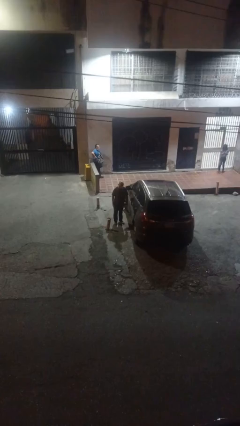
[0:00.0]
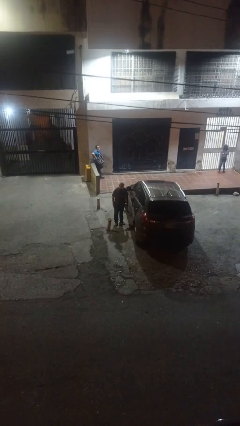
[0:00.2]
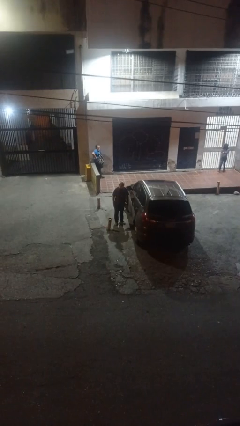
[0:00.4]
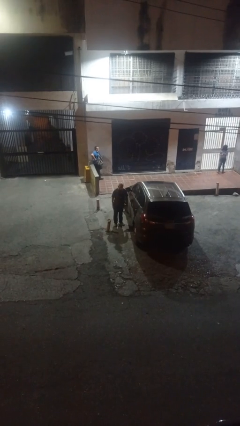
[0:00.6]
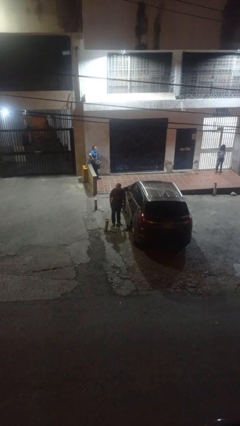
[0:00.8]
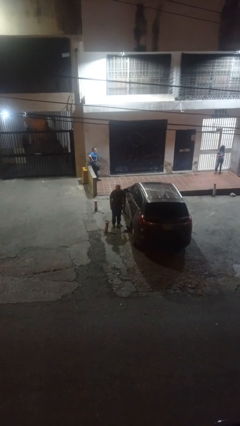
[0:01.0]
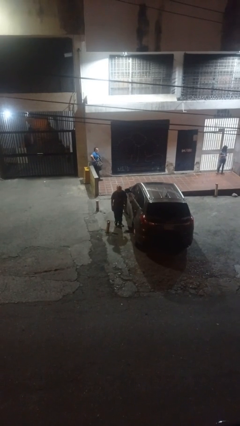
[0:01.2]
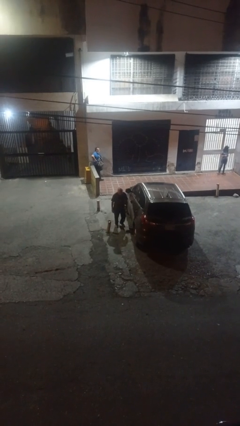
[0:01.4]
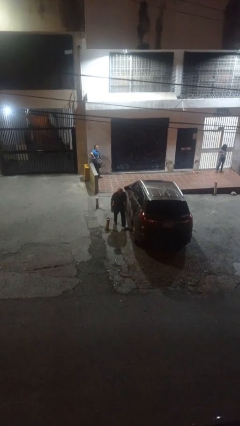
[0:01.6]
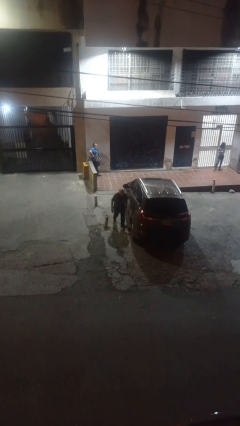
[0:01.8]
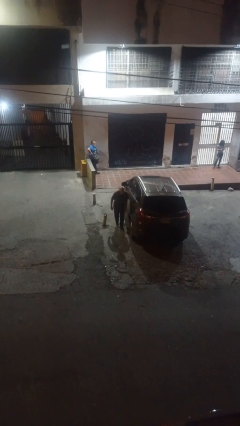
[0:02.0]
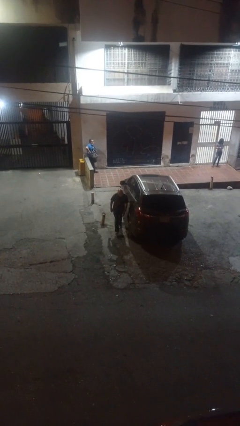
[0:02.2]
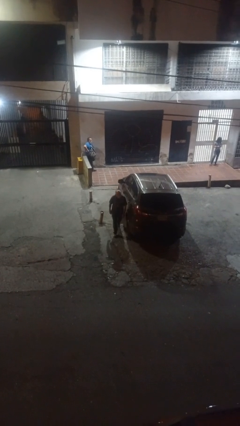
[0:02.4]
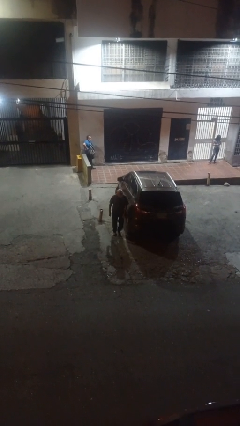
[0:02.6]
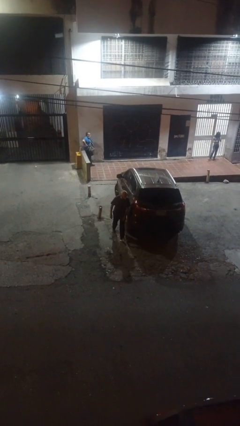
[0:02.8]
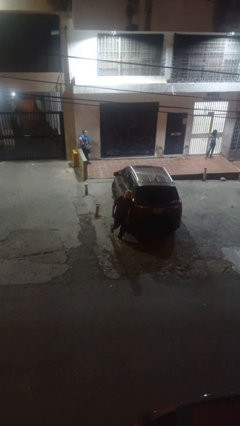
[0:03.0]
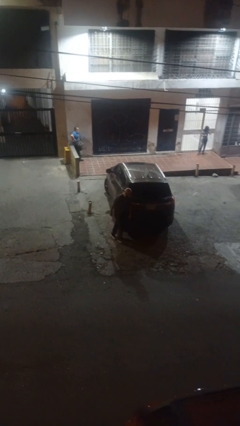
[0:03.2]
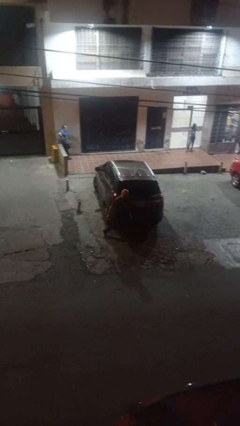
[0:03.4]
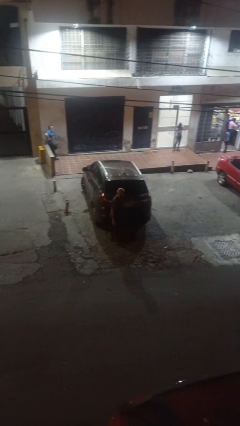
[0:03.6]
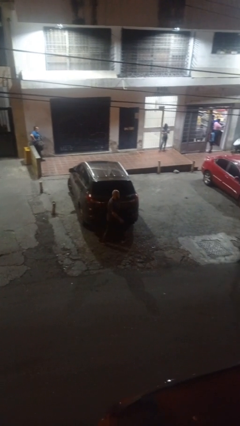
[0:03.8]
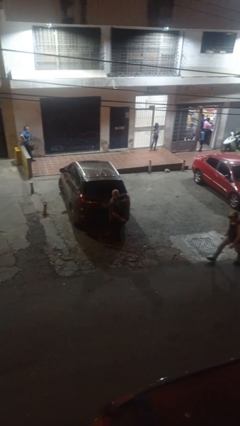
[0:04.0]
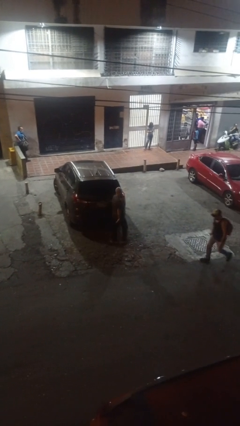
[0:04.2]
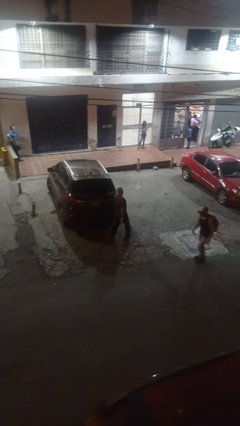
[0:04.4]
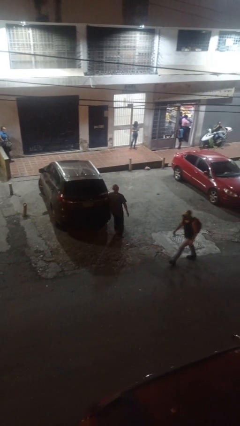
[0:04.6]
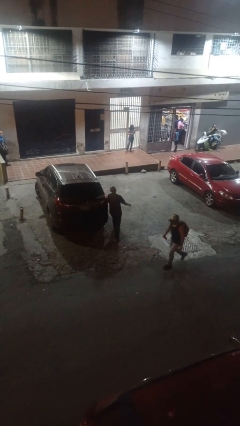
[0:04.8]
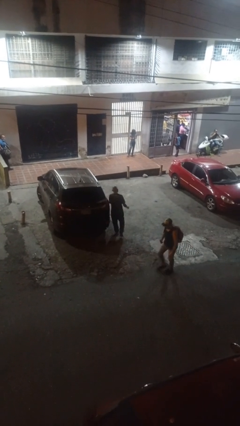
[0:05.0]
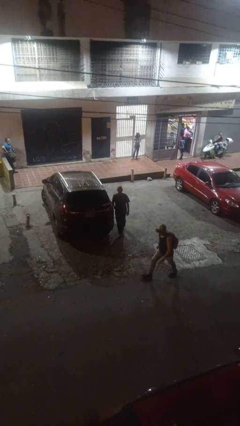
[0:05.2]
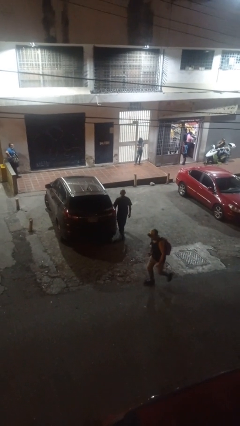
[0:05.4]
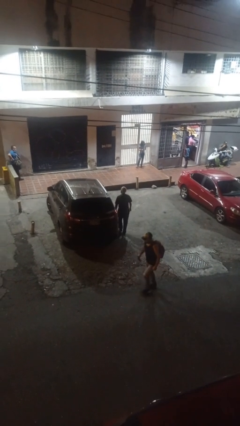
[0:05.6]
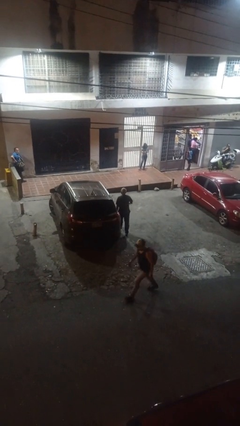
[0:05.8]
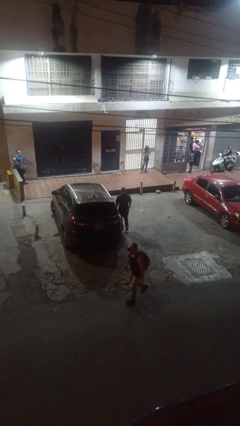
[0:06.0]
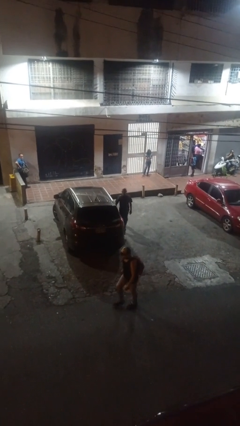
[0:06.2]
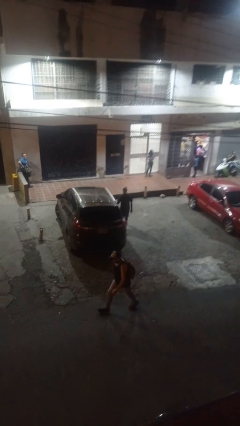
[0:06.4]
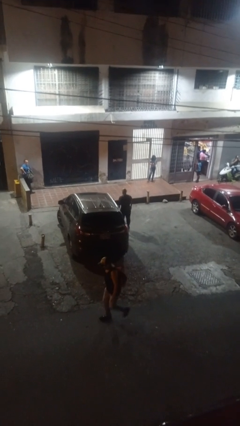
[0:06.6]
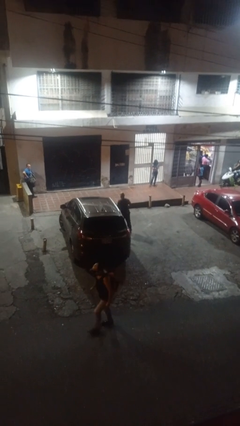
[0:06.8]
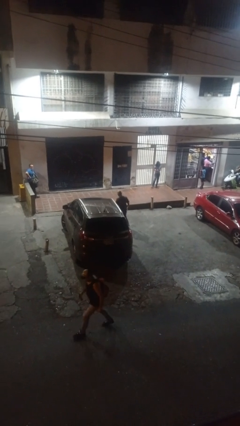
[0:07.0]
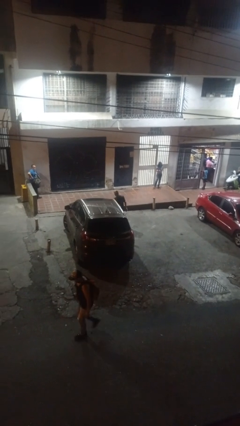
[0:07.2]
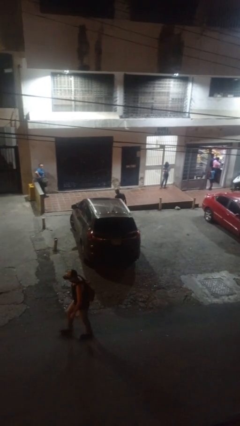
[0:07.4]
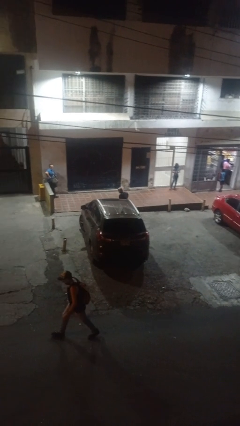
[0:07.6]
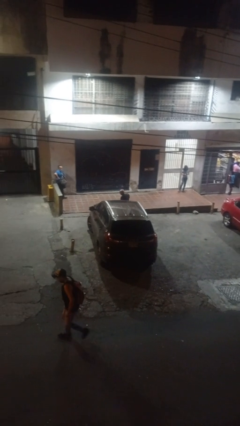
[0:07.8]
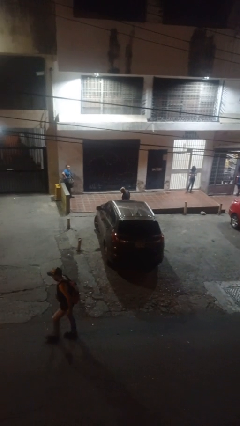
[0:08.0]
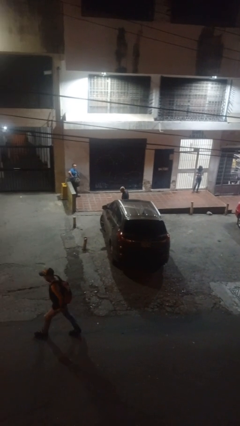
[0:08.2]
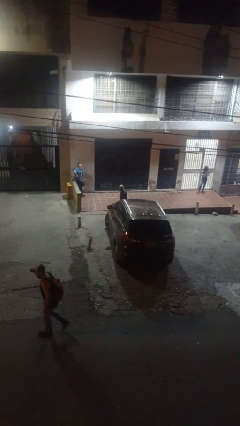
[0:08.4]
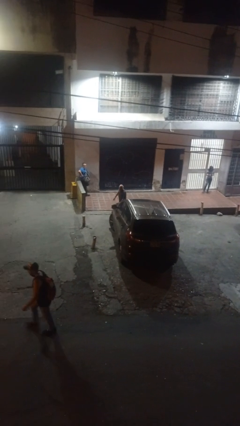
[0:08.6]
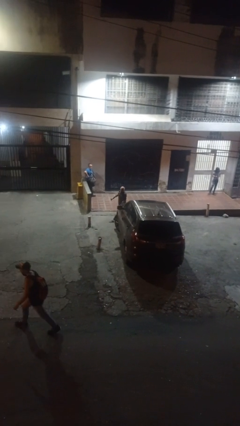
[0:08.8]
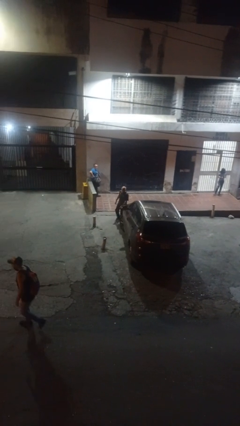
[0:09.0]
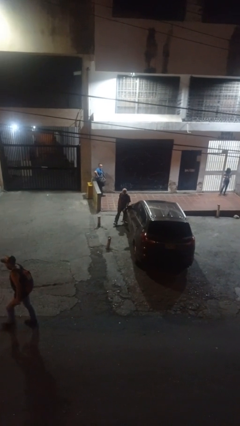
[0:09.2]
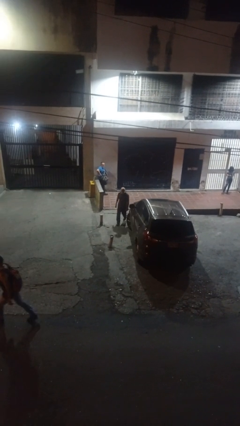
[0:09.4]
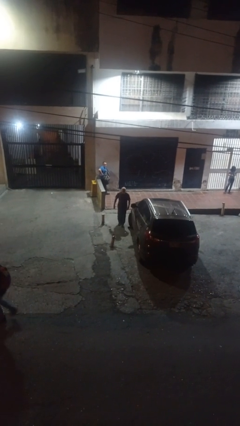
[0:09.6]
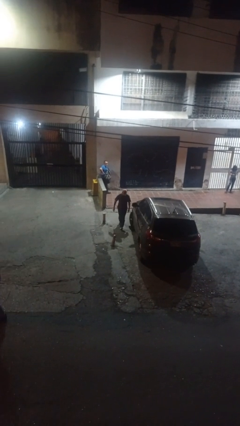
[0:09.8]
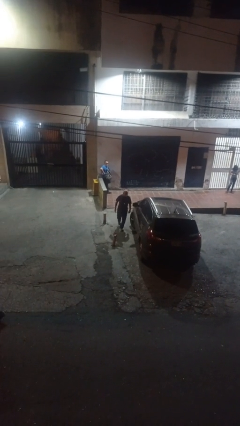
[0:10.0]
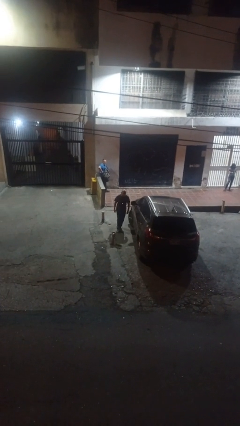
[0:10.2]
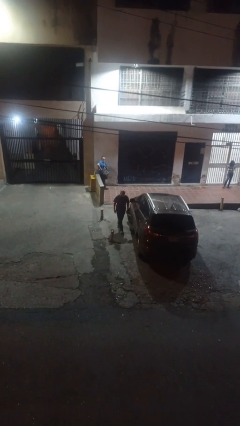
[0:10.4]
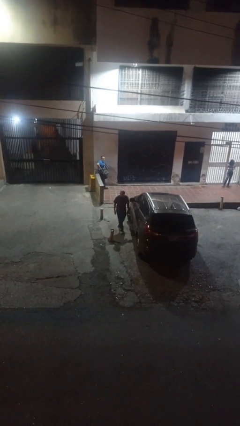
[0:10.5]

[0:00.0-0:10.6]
person walks around car

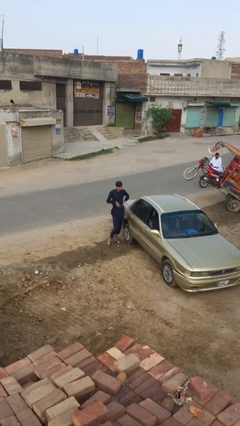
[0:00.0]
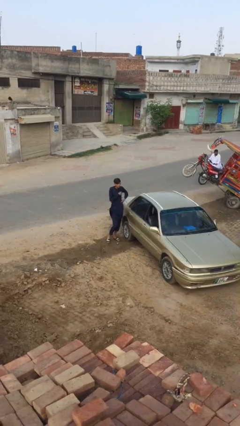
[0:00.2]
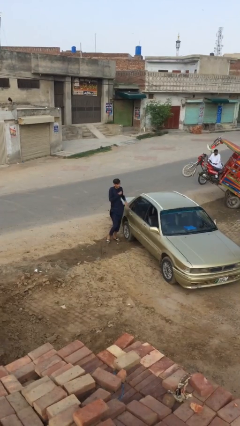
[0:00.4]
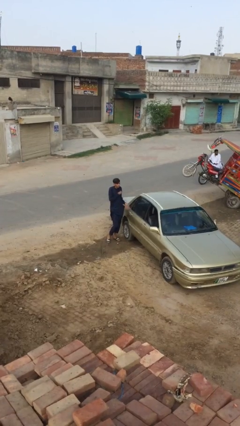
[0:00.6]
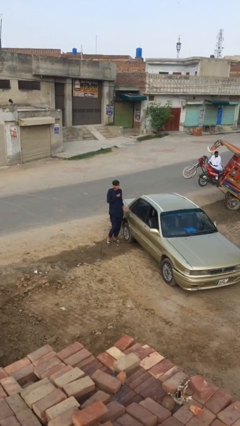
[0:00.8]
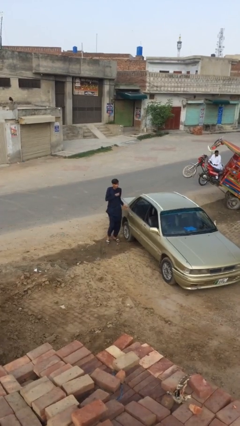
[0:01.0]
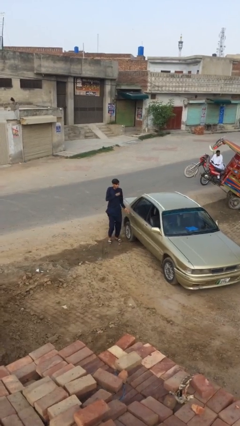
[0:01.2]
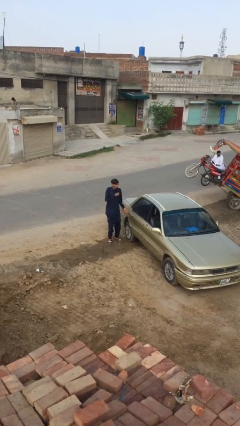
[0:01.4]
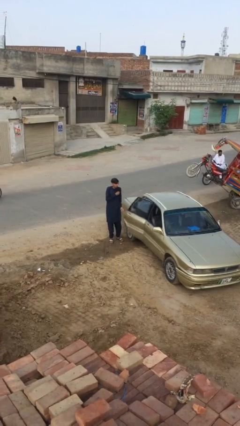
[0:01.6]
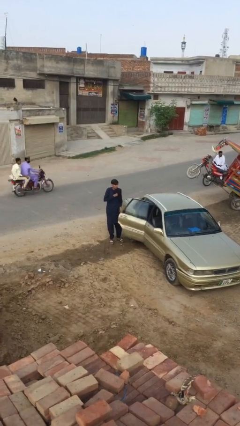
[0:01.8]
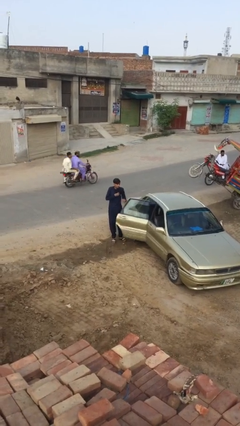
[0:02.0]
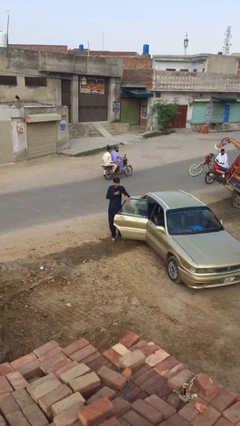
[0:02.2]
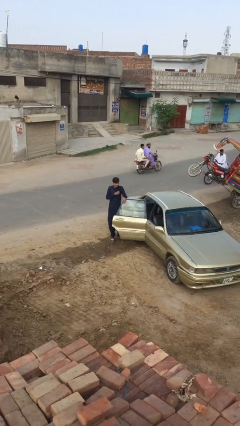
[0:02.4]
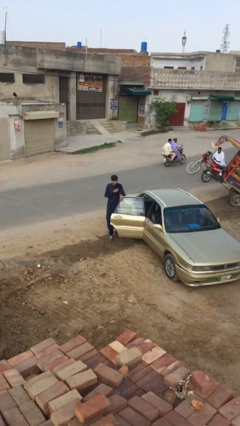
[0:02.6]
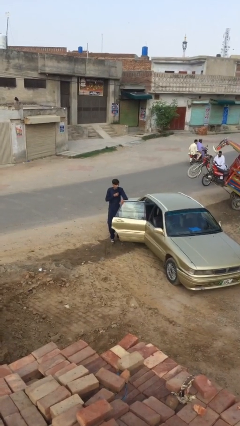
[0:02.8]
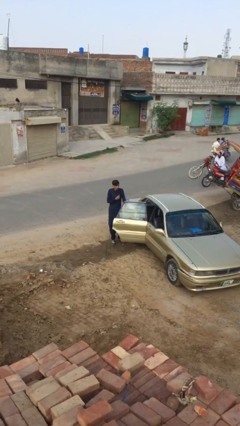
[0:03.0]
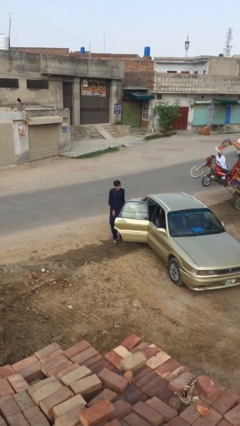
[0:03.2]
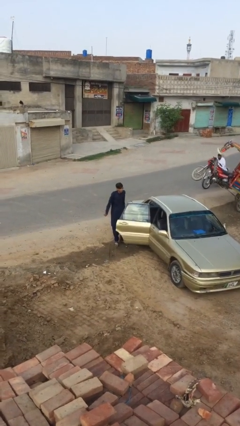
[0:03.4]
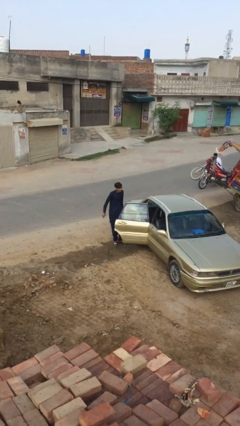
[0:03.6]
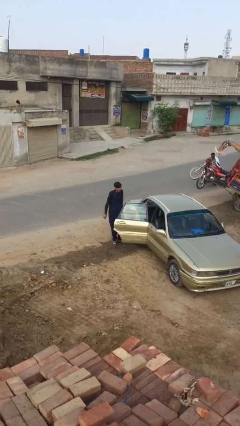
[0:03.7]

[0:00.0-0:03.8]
person opens car door

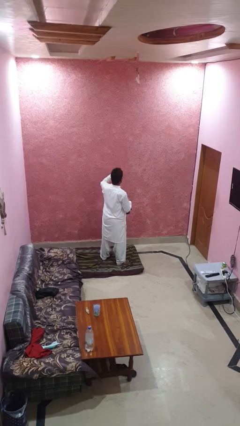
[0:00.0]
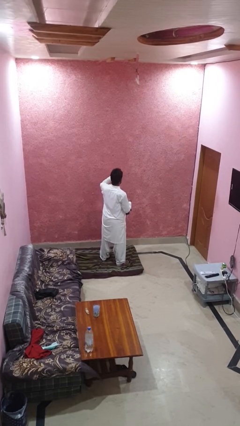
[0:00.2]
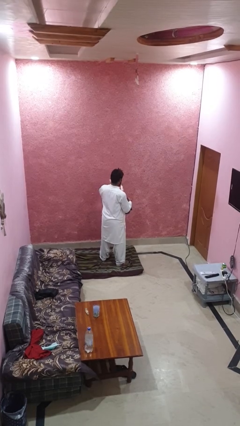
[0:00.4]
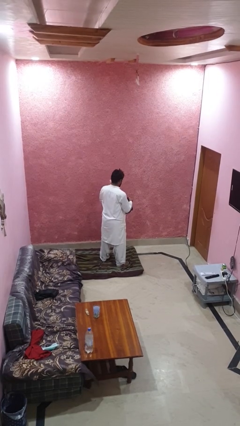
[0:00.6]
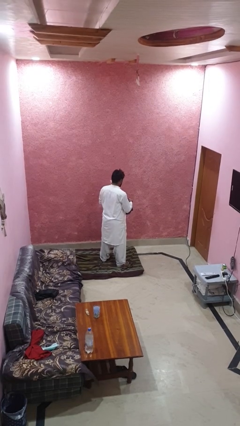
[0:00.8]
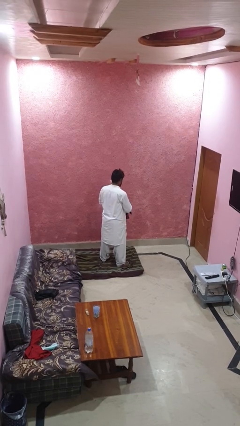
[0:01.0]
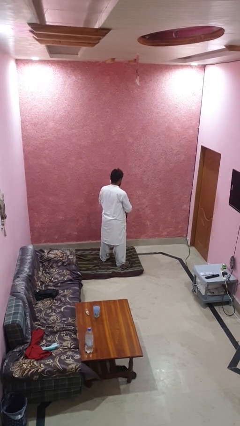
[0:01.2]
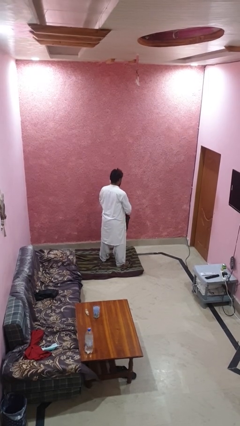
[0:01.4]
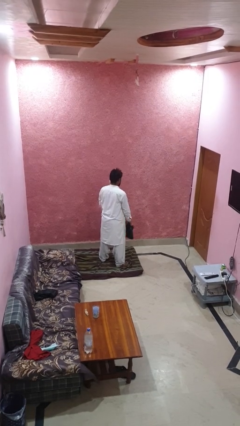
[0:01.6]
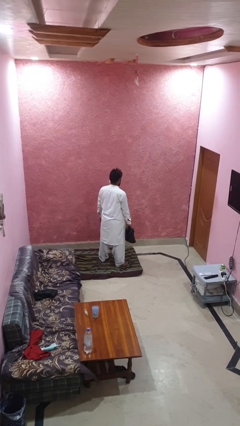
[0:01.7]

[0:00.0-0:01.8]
person puts object into purse

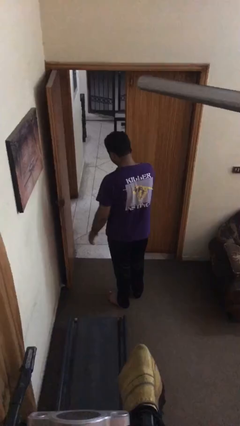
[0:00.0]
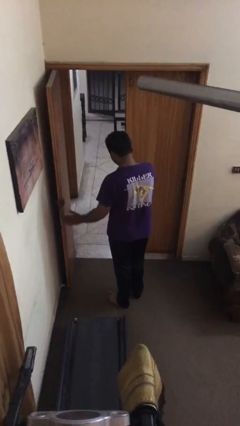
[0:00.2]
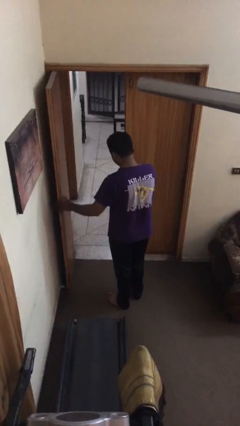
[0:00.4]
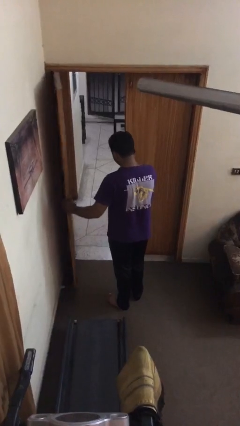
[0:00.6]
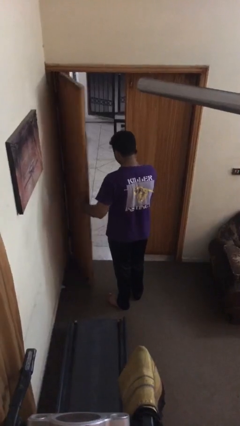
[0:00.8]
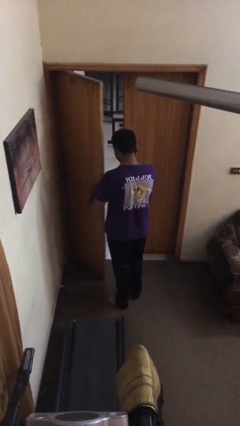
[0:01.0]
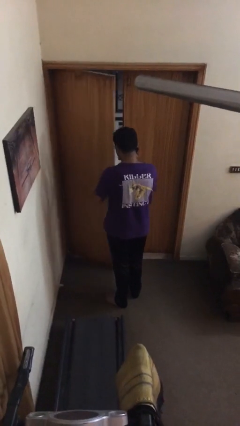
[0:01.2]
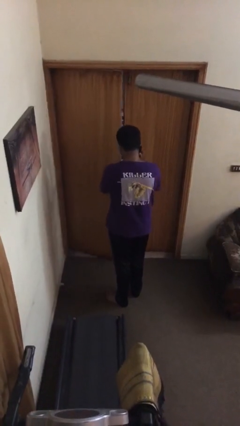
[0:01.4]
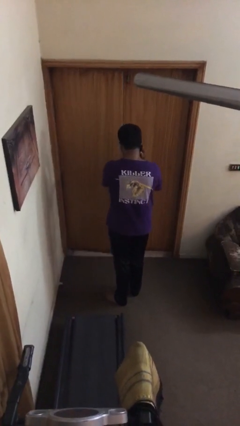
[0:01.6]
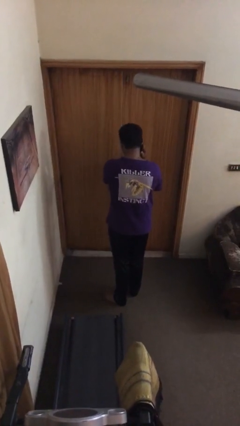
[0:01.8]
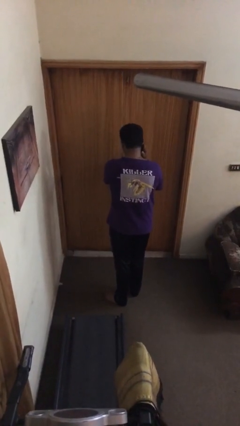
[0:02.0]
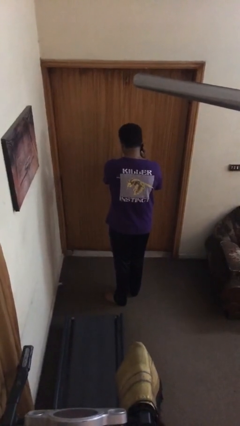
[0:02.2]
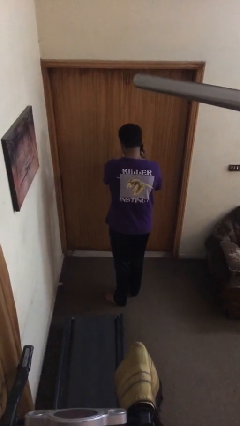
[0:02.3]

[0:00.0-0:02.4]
person closes facility door
